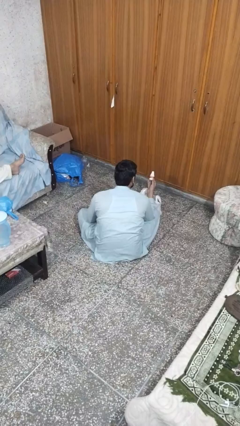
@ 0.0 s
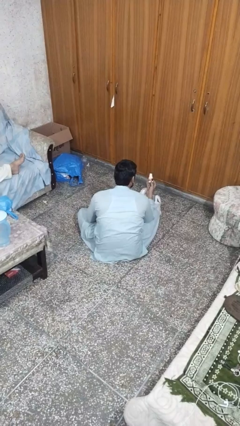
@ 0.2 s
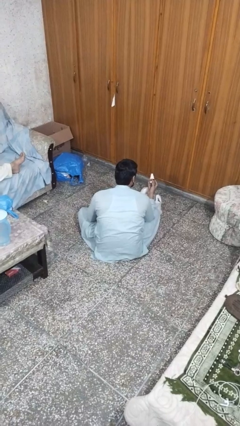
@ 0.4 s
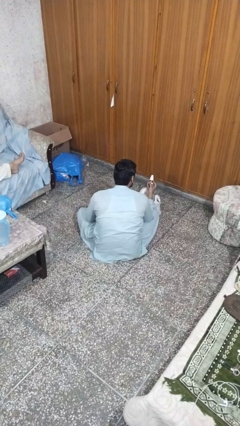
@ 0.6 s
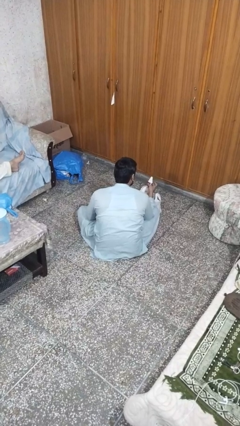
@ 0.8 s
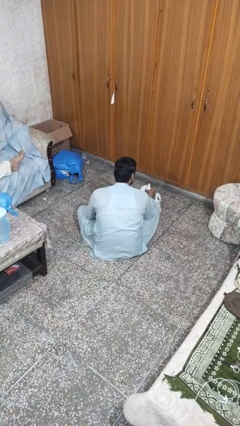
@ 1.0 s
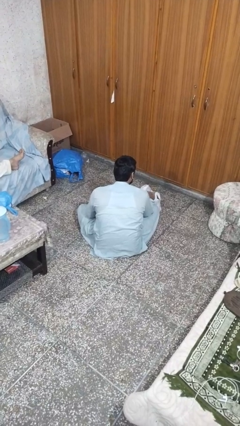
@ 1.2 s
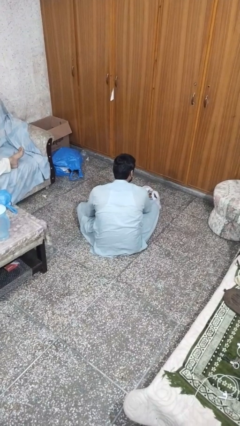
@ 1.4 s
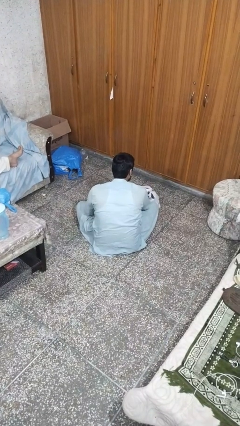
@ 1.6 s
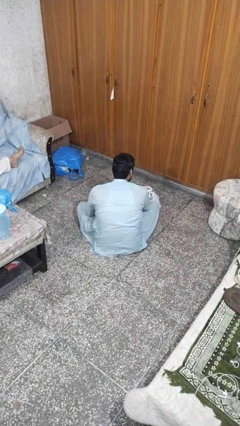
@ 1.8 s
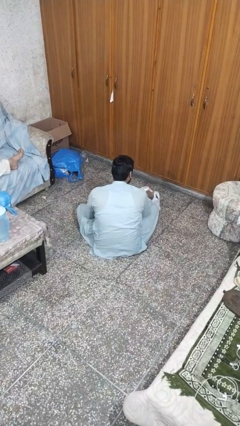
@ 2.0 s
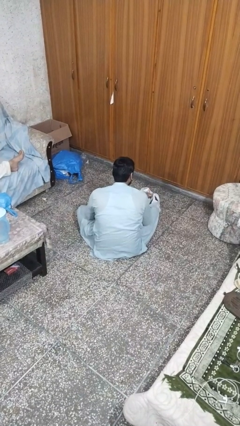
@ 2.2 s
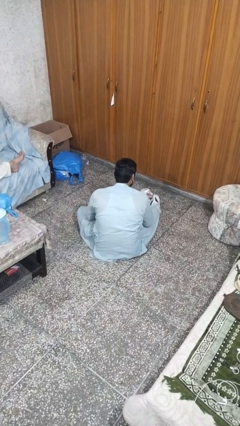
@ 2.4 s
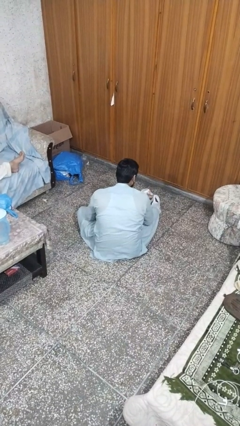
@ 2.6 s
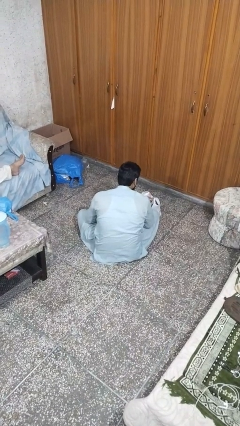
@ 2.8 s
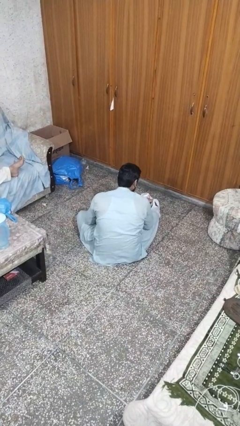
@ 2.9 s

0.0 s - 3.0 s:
person puts object into bag

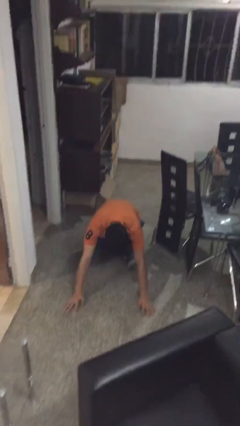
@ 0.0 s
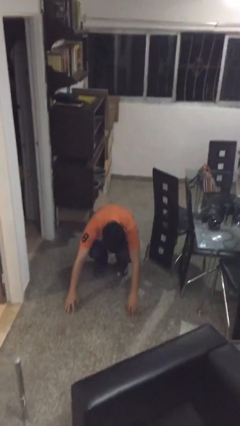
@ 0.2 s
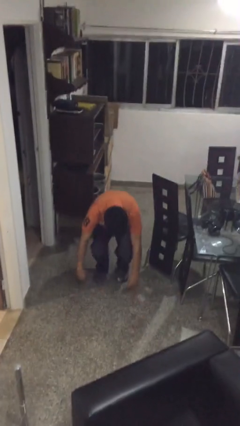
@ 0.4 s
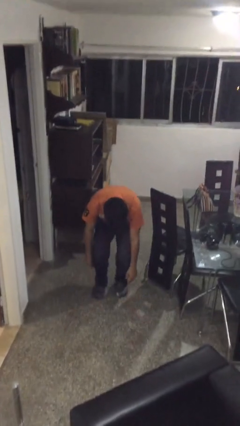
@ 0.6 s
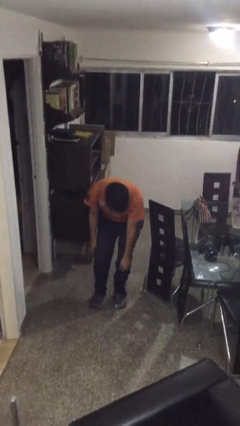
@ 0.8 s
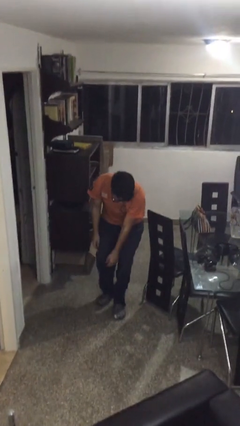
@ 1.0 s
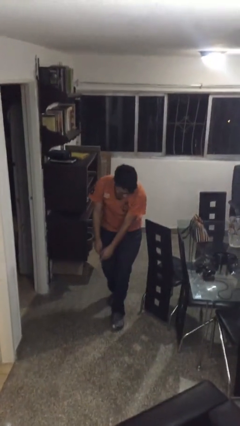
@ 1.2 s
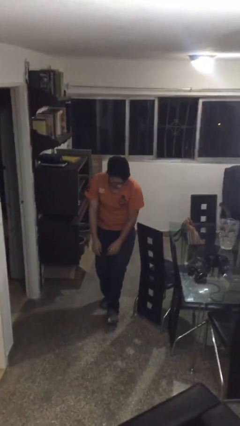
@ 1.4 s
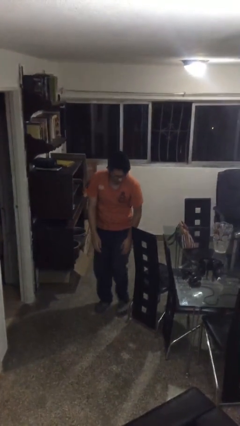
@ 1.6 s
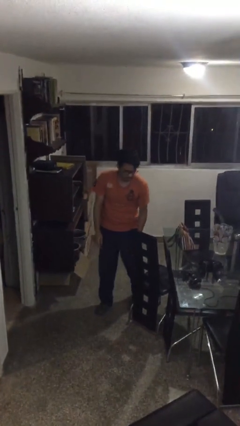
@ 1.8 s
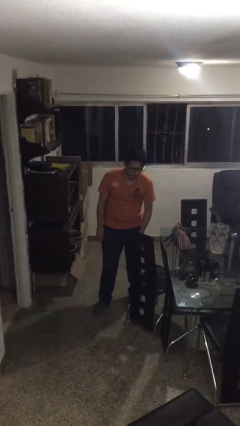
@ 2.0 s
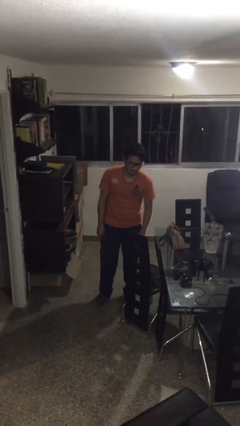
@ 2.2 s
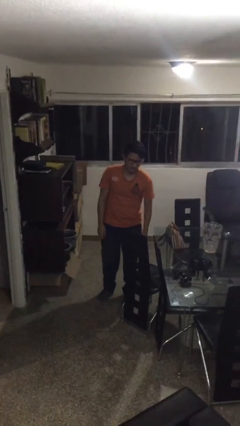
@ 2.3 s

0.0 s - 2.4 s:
person stands up from floor

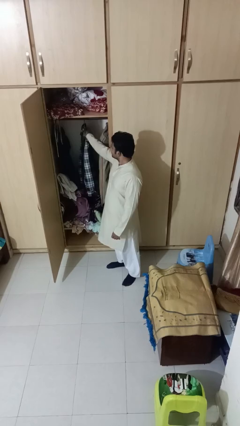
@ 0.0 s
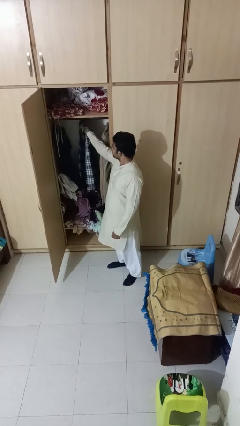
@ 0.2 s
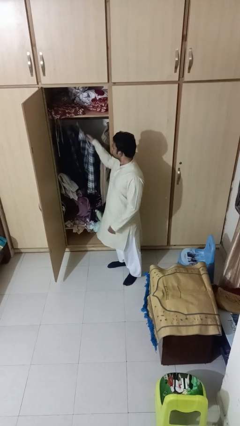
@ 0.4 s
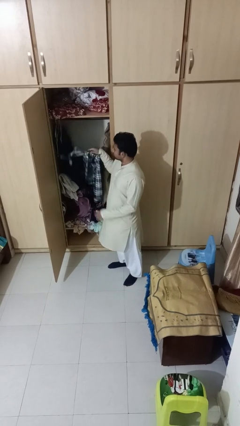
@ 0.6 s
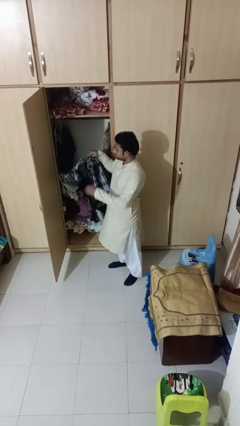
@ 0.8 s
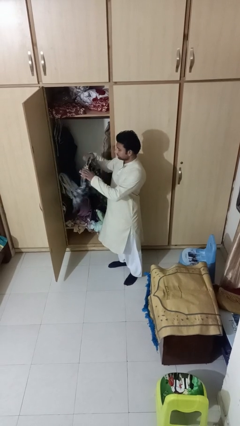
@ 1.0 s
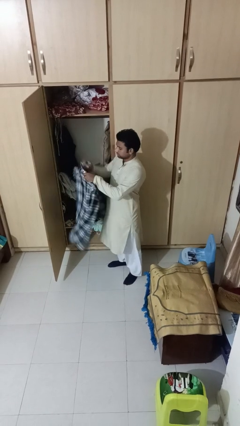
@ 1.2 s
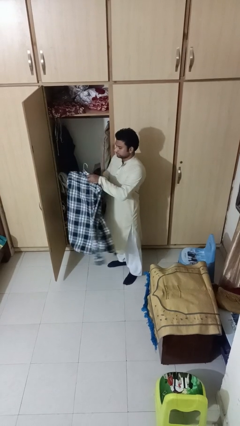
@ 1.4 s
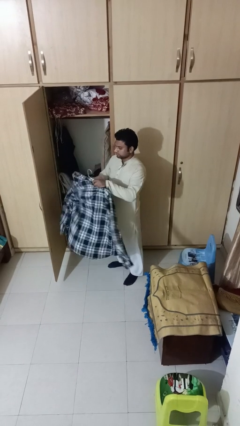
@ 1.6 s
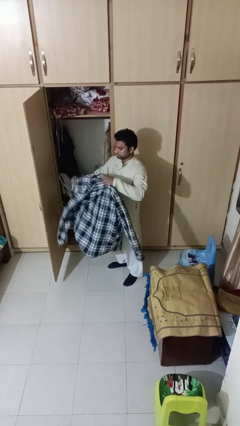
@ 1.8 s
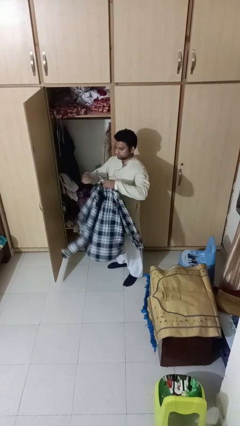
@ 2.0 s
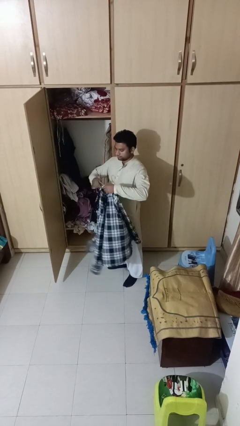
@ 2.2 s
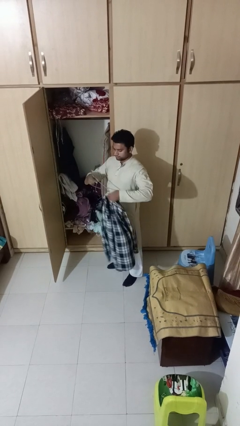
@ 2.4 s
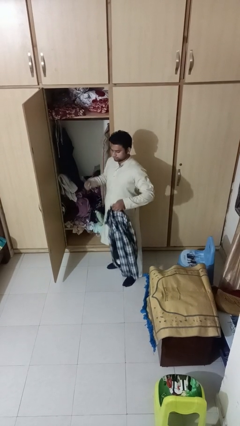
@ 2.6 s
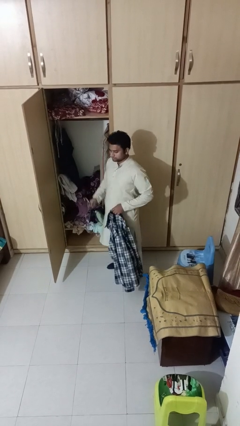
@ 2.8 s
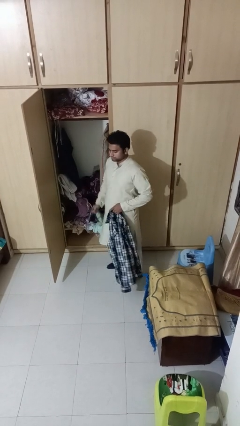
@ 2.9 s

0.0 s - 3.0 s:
person takes clothes from closet

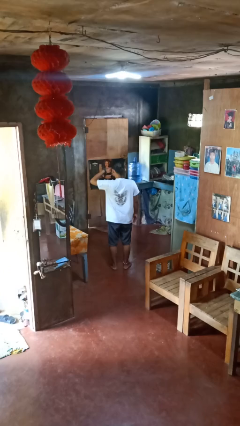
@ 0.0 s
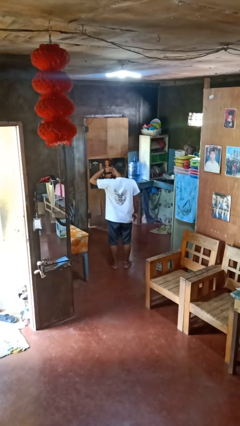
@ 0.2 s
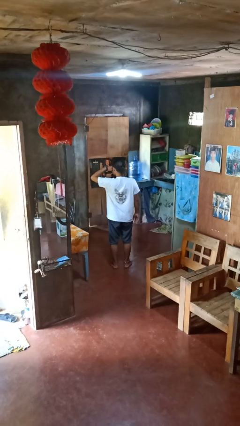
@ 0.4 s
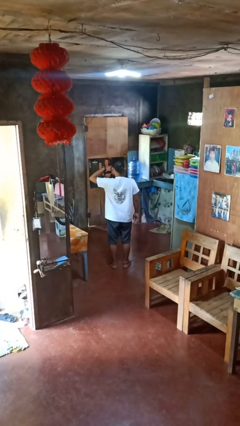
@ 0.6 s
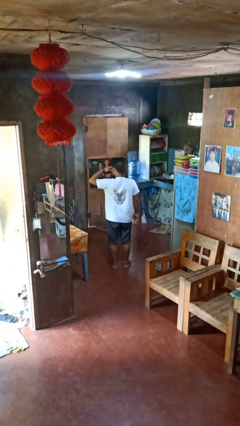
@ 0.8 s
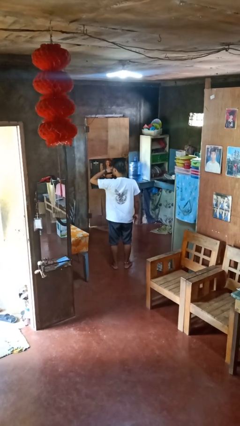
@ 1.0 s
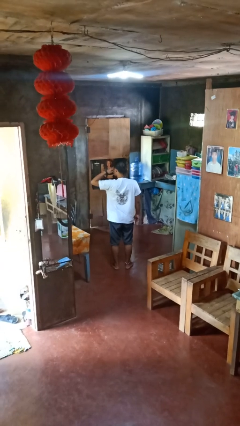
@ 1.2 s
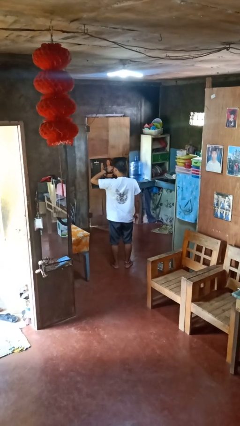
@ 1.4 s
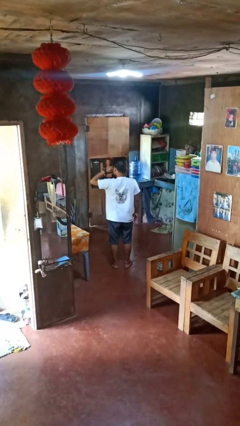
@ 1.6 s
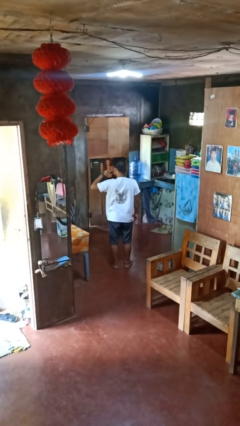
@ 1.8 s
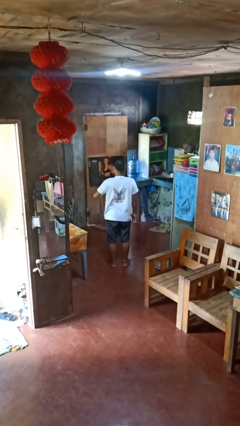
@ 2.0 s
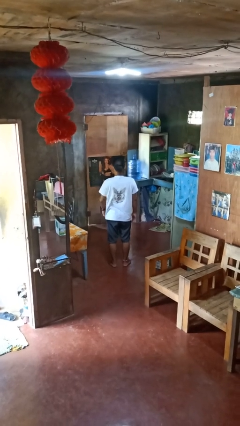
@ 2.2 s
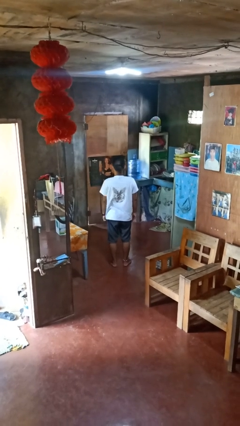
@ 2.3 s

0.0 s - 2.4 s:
person rubs eyes

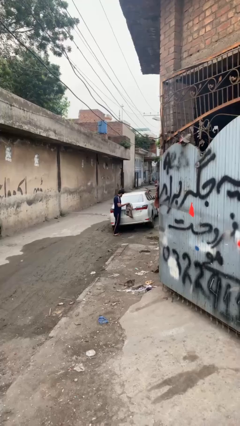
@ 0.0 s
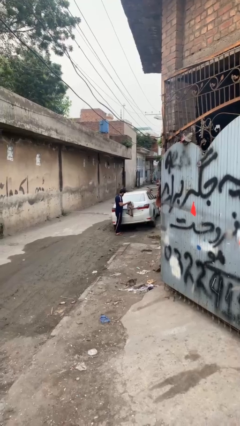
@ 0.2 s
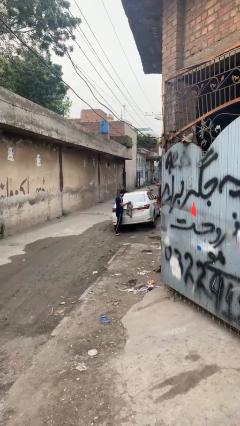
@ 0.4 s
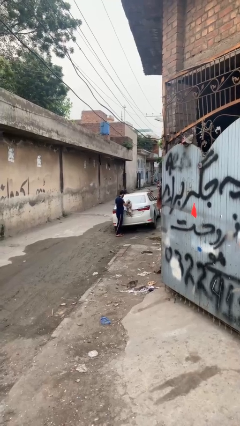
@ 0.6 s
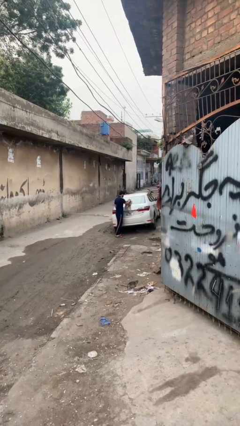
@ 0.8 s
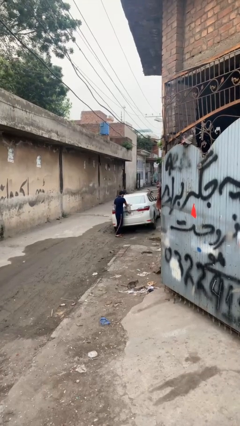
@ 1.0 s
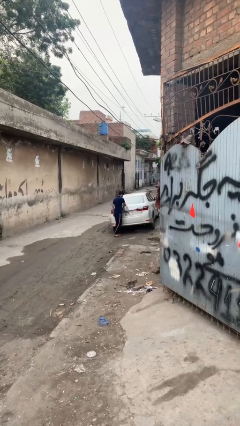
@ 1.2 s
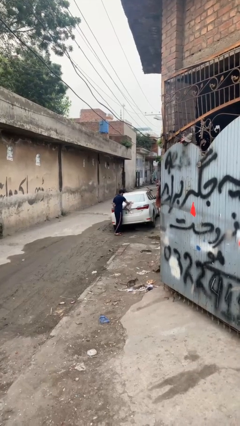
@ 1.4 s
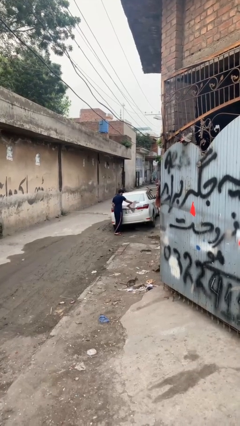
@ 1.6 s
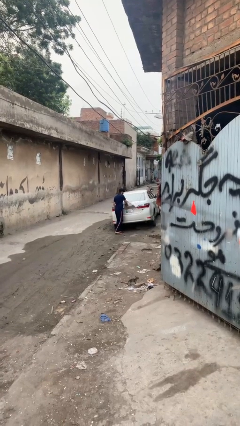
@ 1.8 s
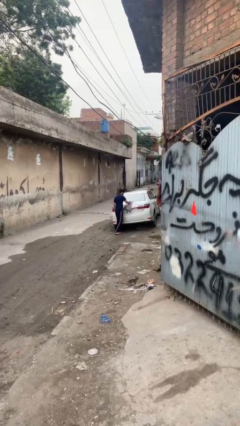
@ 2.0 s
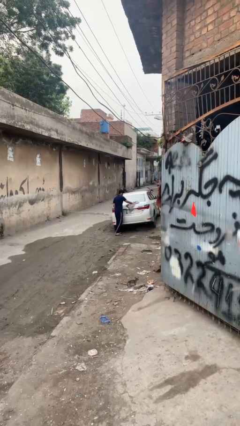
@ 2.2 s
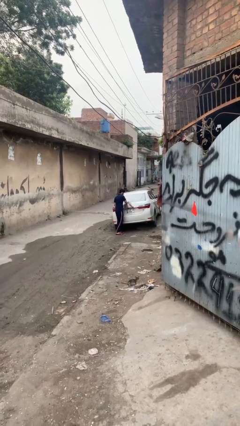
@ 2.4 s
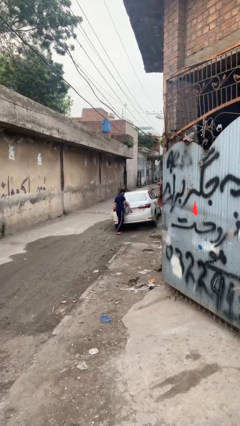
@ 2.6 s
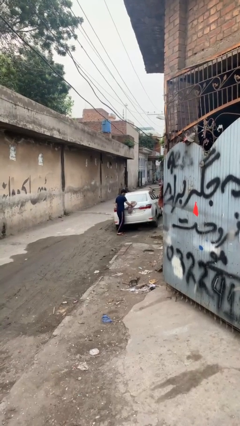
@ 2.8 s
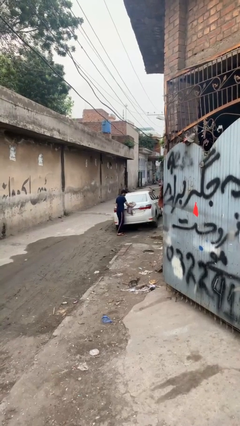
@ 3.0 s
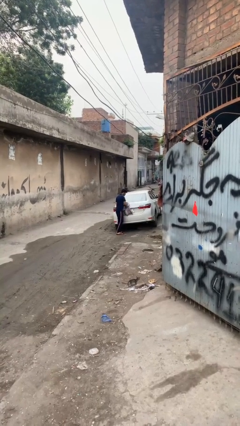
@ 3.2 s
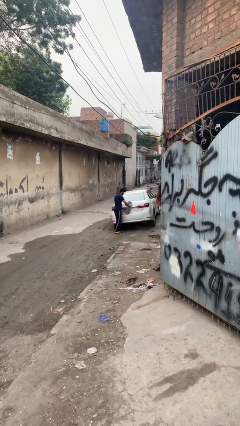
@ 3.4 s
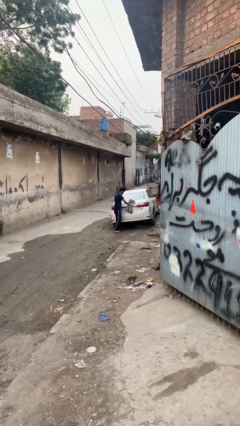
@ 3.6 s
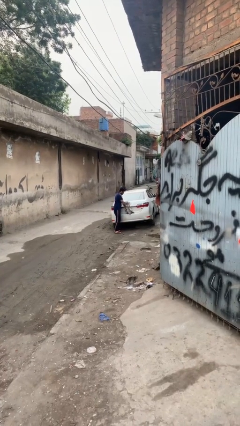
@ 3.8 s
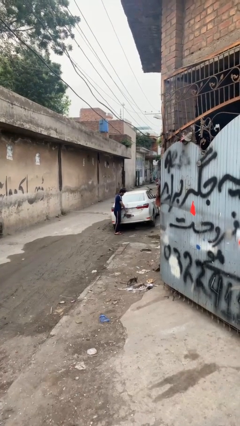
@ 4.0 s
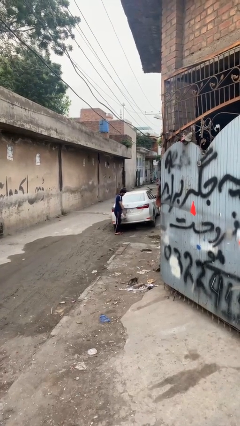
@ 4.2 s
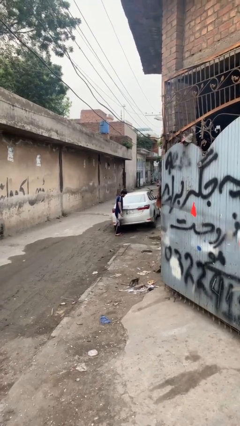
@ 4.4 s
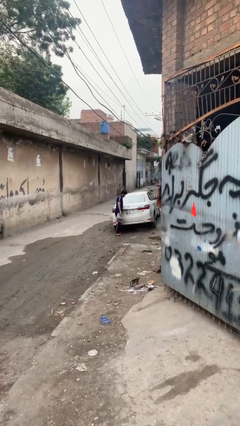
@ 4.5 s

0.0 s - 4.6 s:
person polishes car with rag

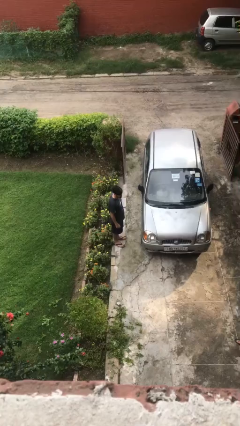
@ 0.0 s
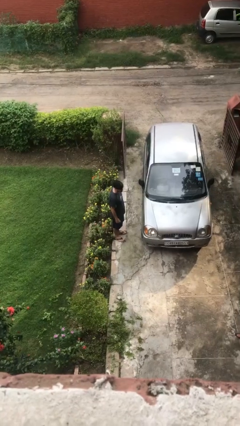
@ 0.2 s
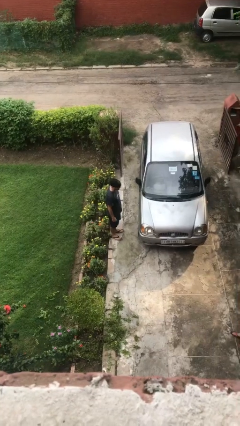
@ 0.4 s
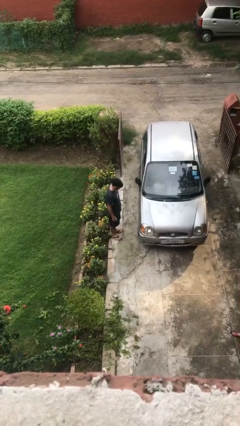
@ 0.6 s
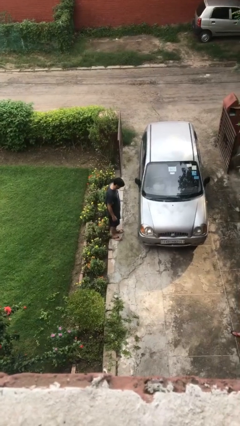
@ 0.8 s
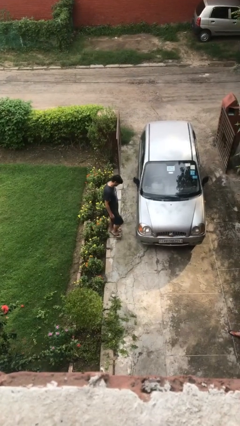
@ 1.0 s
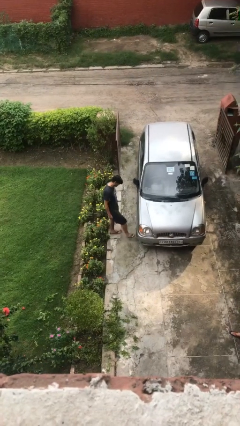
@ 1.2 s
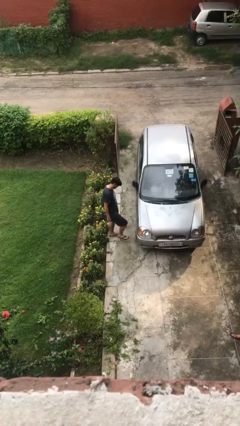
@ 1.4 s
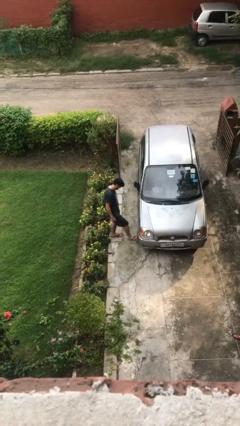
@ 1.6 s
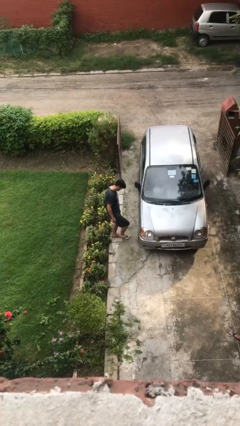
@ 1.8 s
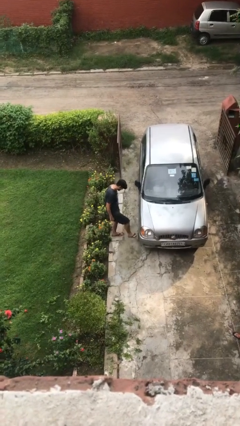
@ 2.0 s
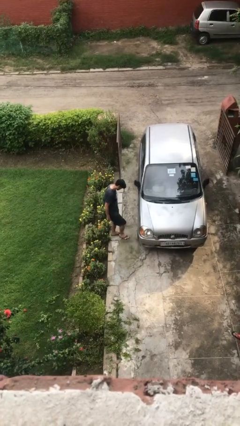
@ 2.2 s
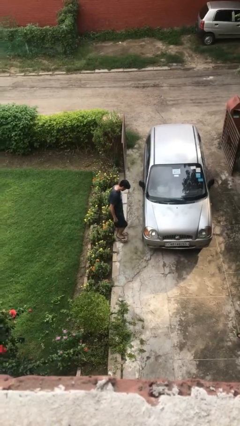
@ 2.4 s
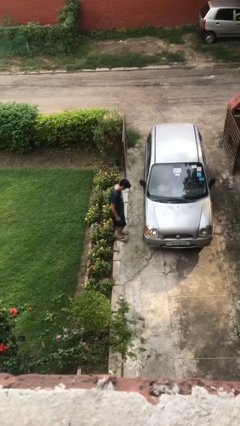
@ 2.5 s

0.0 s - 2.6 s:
person kicks car tires
